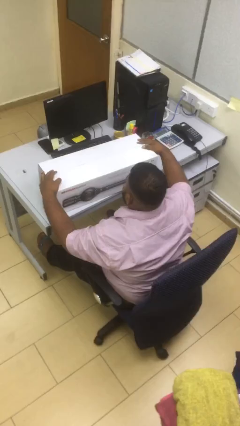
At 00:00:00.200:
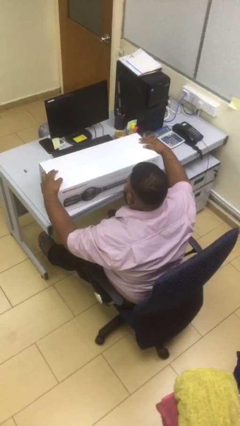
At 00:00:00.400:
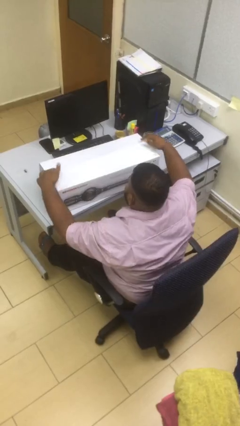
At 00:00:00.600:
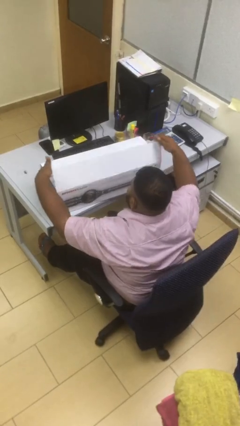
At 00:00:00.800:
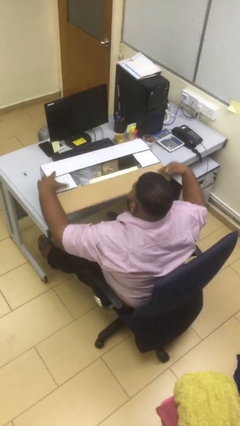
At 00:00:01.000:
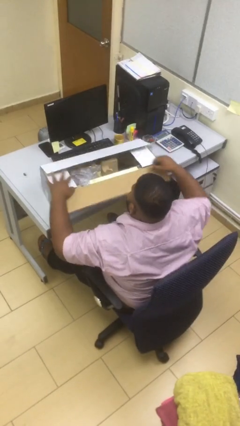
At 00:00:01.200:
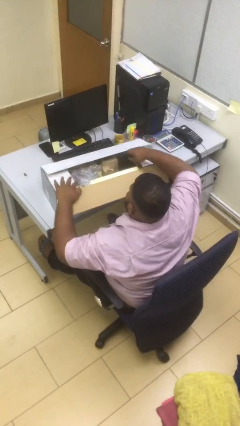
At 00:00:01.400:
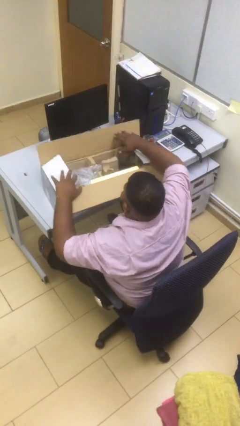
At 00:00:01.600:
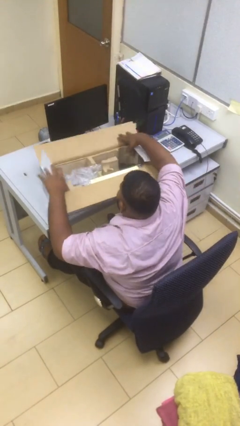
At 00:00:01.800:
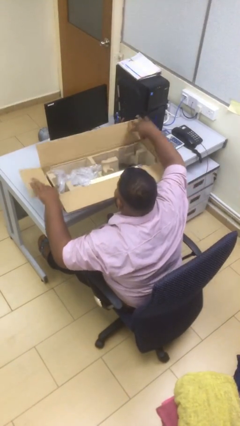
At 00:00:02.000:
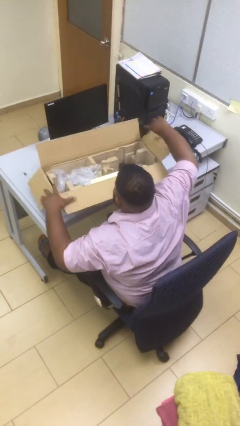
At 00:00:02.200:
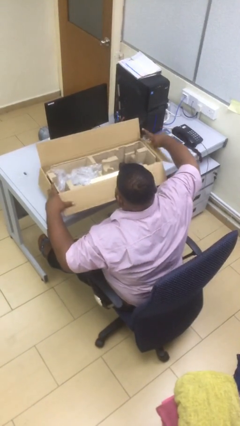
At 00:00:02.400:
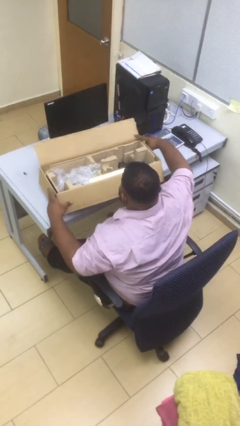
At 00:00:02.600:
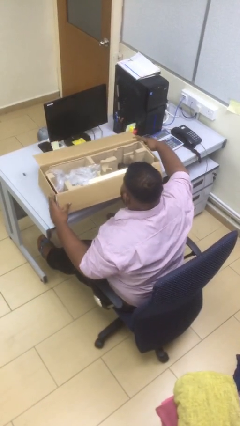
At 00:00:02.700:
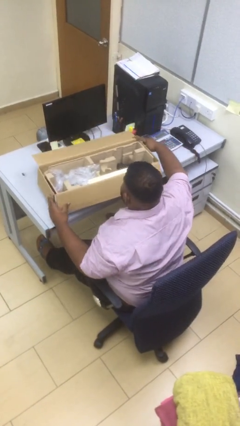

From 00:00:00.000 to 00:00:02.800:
person opens box

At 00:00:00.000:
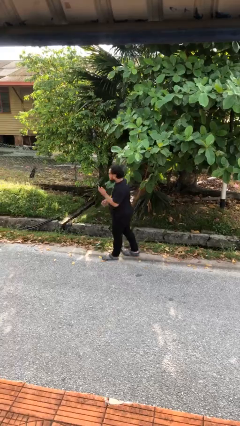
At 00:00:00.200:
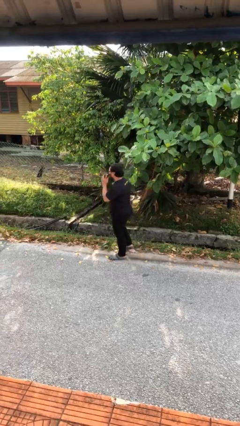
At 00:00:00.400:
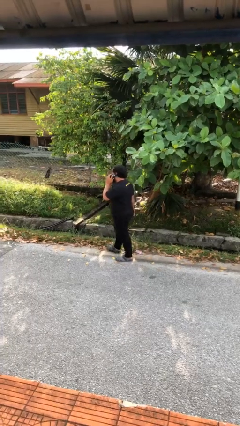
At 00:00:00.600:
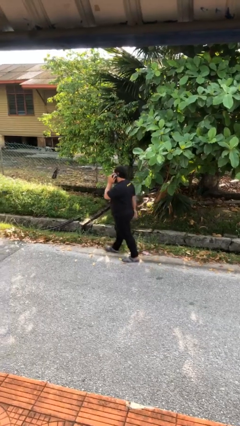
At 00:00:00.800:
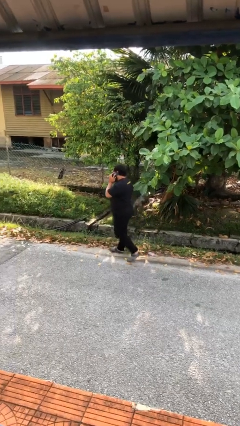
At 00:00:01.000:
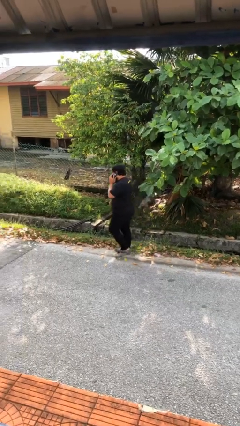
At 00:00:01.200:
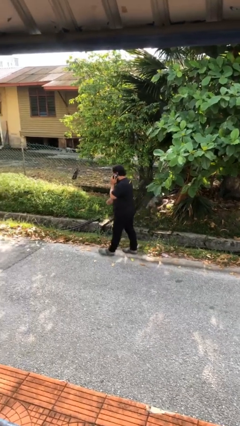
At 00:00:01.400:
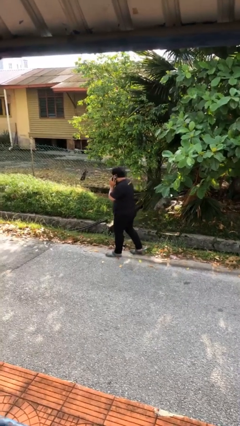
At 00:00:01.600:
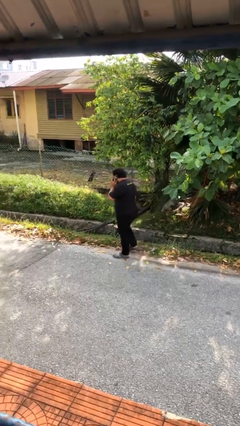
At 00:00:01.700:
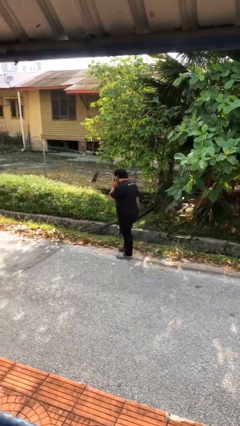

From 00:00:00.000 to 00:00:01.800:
person talks on phone

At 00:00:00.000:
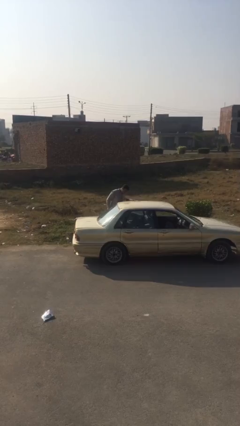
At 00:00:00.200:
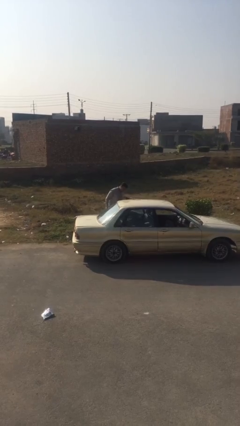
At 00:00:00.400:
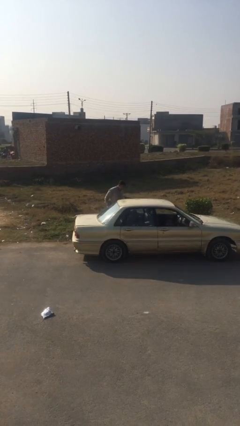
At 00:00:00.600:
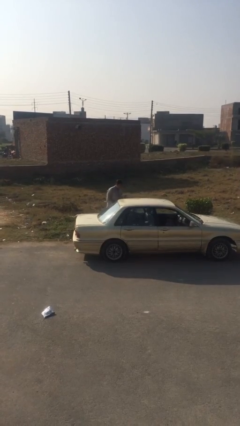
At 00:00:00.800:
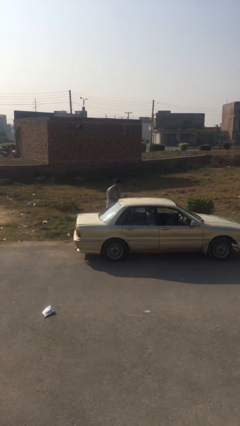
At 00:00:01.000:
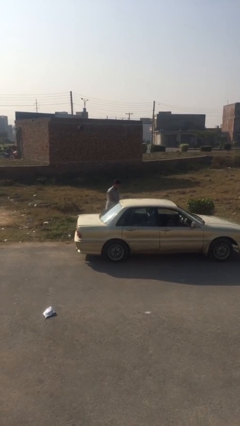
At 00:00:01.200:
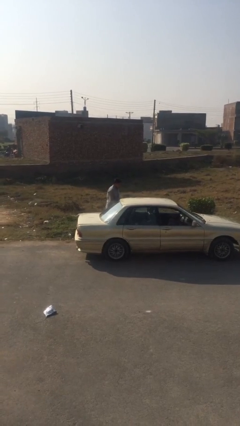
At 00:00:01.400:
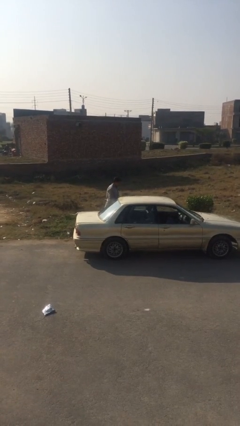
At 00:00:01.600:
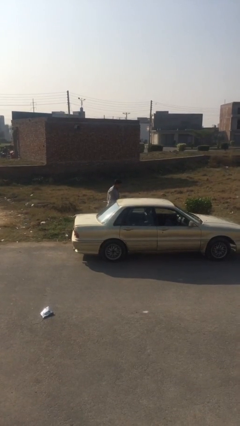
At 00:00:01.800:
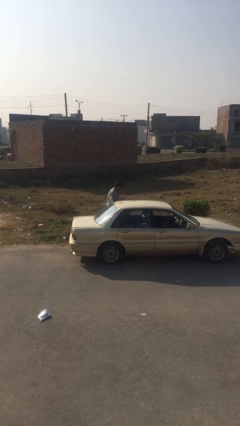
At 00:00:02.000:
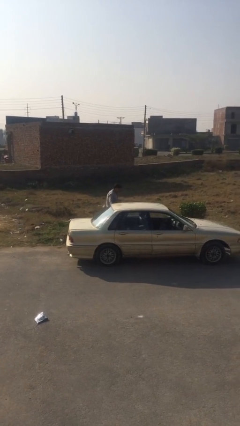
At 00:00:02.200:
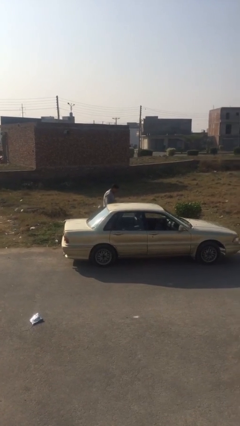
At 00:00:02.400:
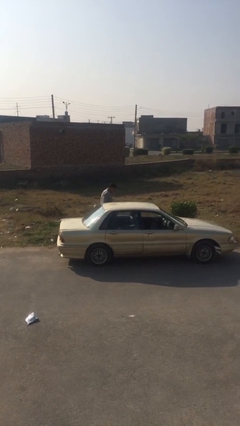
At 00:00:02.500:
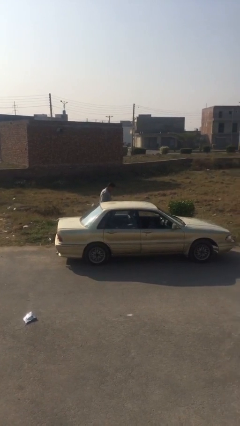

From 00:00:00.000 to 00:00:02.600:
person closes car door

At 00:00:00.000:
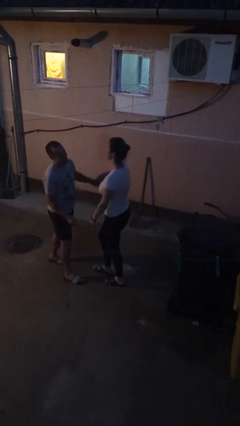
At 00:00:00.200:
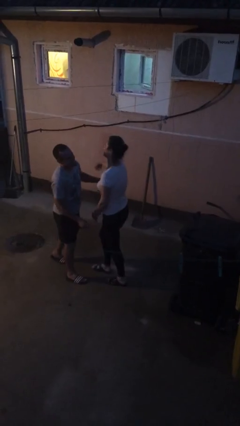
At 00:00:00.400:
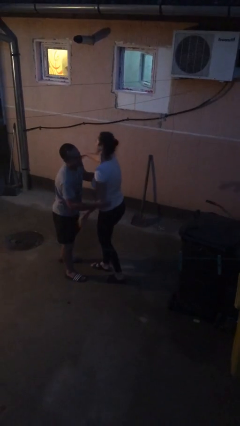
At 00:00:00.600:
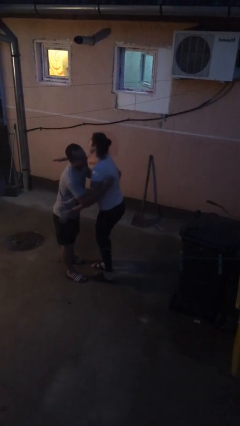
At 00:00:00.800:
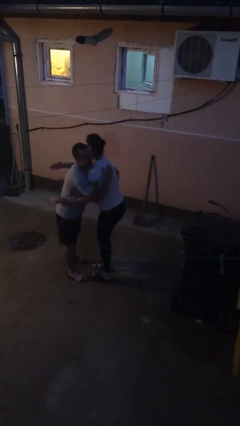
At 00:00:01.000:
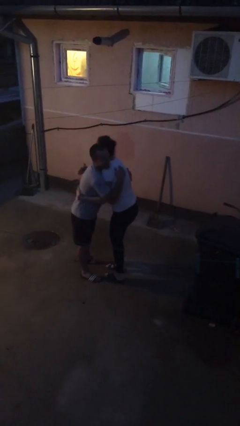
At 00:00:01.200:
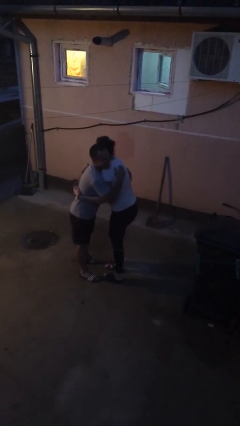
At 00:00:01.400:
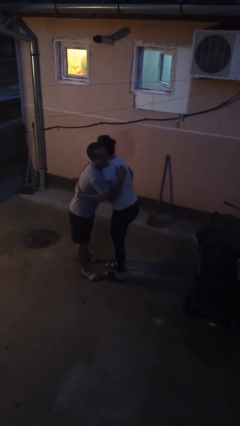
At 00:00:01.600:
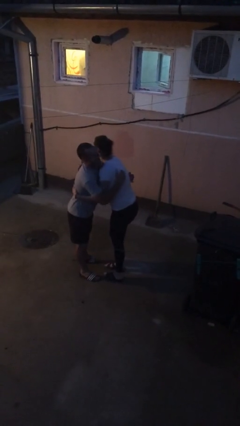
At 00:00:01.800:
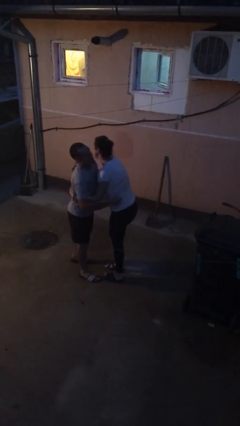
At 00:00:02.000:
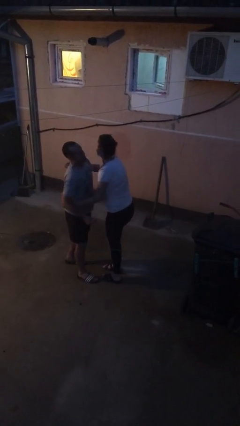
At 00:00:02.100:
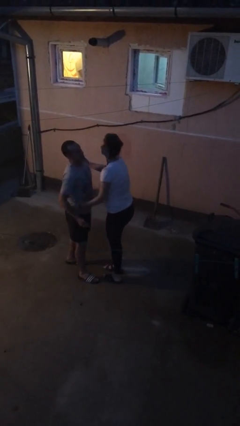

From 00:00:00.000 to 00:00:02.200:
person embraces person

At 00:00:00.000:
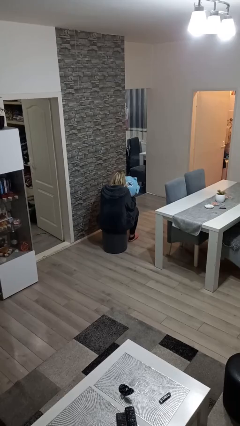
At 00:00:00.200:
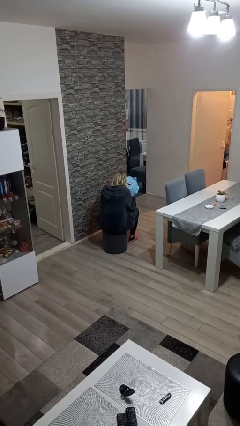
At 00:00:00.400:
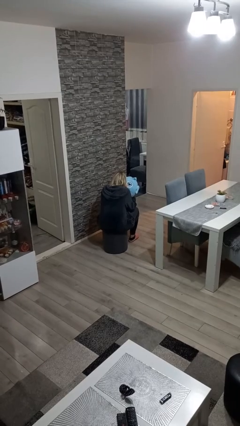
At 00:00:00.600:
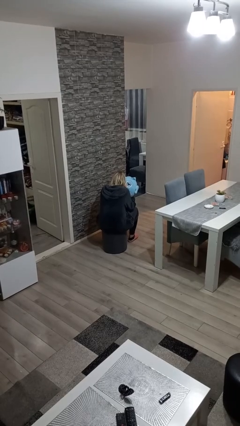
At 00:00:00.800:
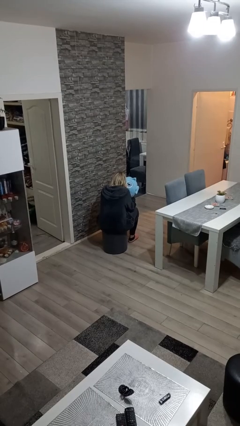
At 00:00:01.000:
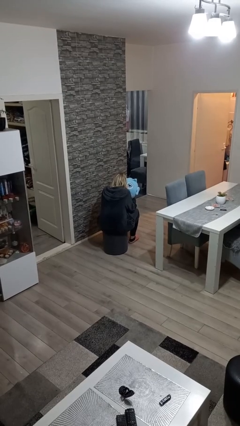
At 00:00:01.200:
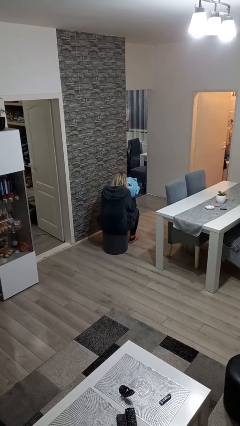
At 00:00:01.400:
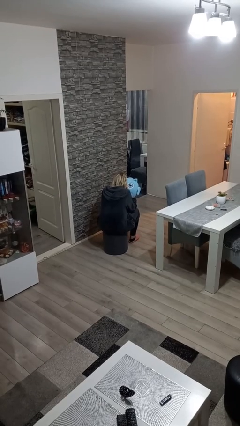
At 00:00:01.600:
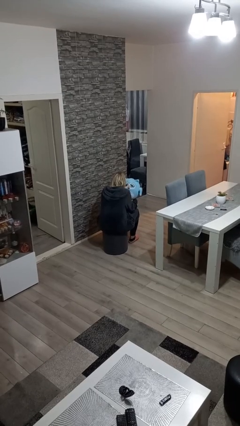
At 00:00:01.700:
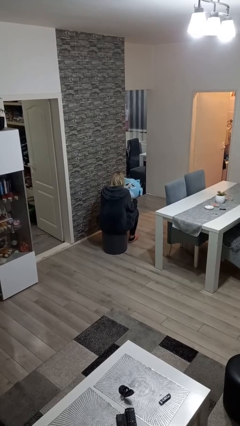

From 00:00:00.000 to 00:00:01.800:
person hugs stuffed animal

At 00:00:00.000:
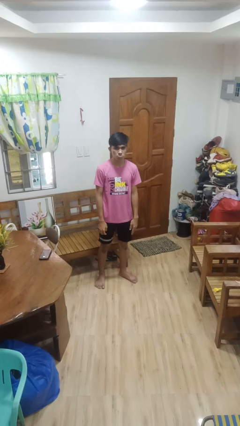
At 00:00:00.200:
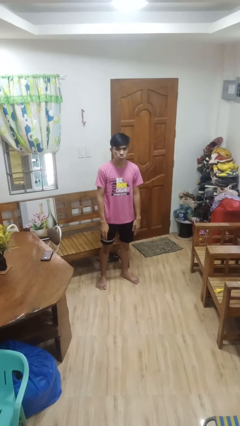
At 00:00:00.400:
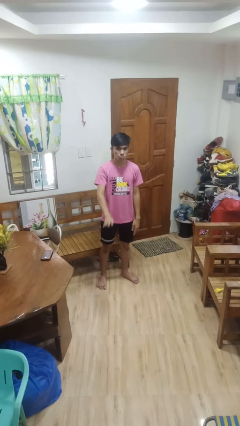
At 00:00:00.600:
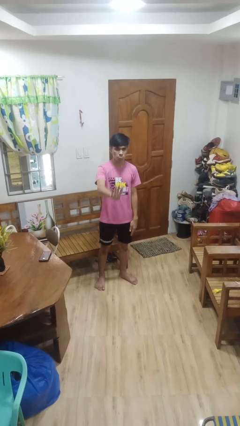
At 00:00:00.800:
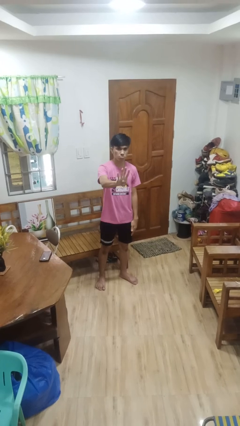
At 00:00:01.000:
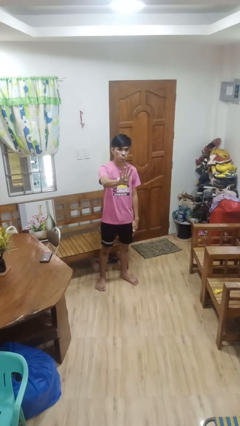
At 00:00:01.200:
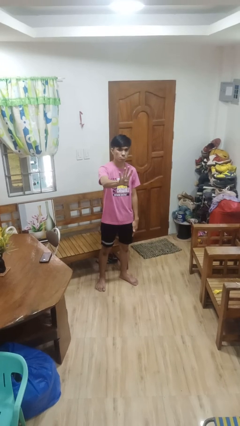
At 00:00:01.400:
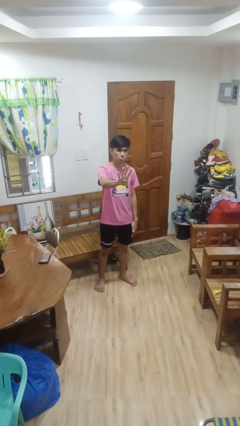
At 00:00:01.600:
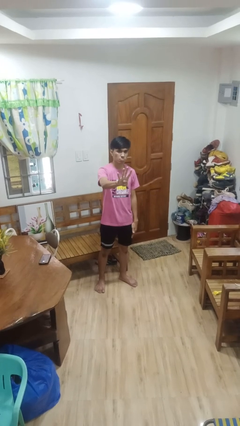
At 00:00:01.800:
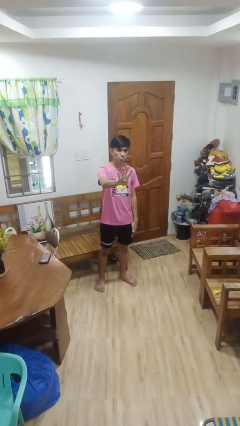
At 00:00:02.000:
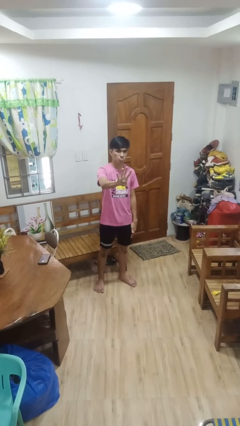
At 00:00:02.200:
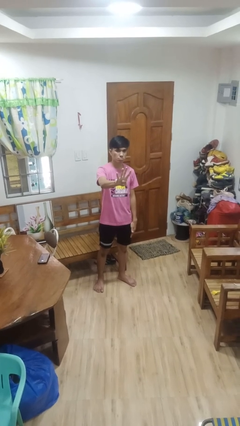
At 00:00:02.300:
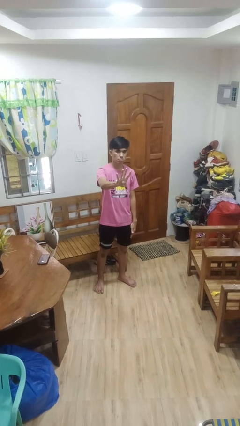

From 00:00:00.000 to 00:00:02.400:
person gestures number four

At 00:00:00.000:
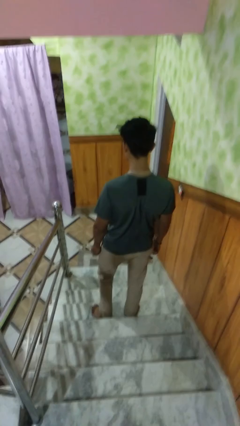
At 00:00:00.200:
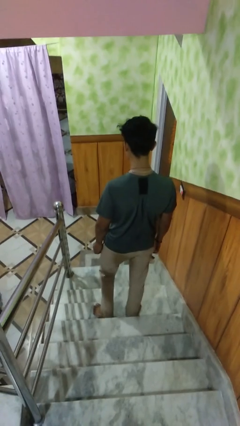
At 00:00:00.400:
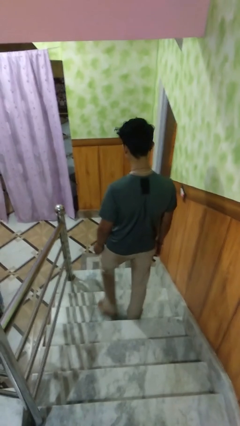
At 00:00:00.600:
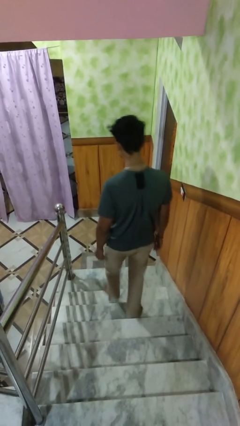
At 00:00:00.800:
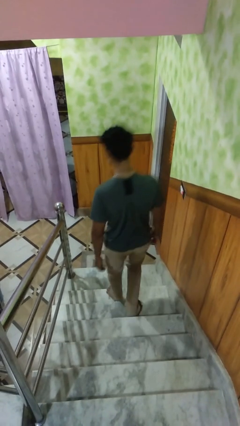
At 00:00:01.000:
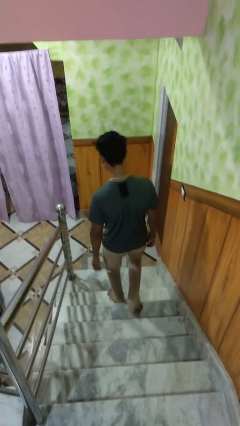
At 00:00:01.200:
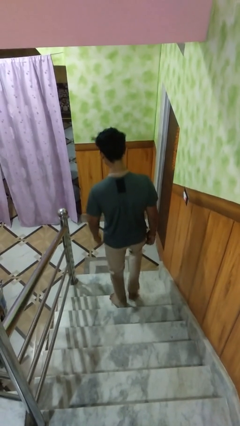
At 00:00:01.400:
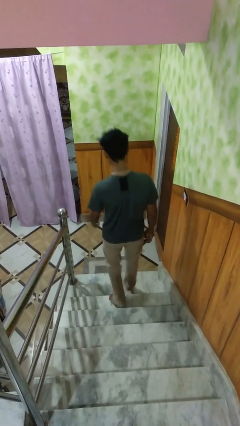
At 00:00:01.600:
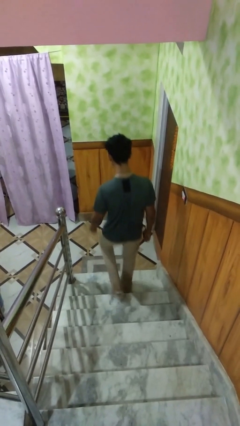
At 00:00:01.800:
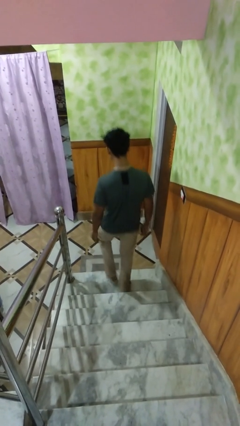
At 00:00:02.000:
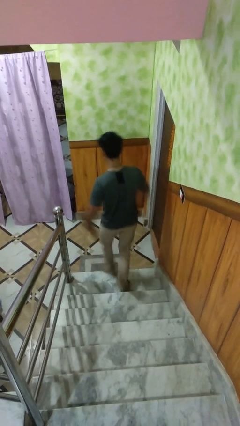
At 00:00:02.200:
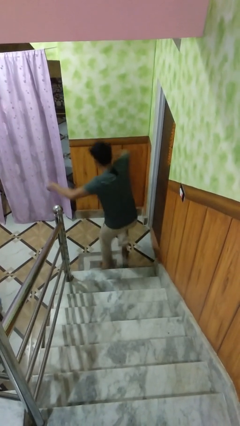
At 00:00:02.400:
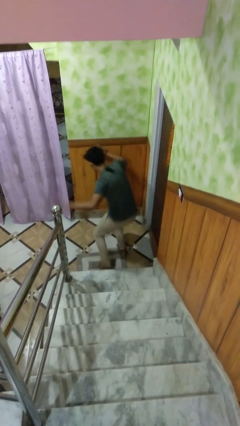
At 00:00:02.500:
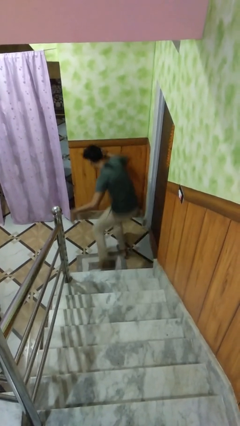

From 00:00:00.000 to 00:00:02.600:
person climbs down stairs

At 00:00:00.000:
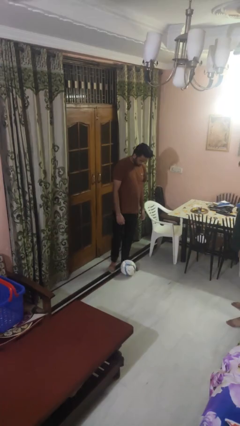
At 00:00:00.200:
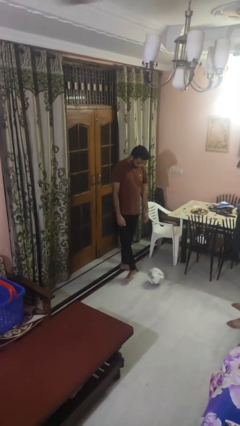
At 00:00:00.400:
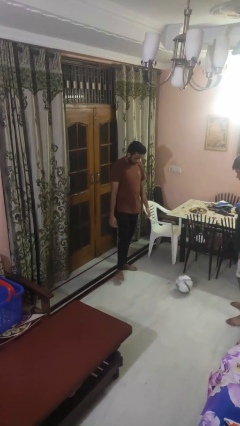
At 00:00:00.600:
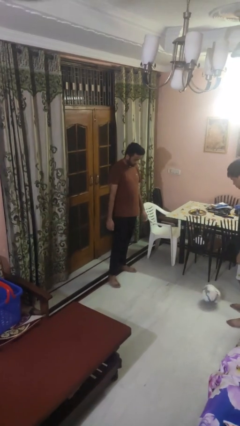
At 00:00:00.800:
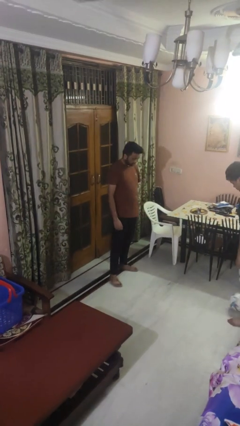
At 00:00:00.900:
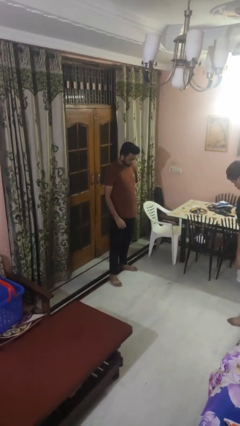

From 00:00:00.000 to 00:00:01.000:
person kicks object to person
